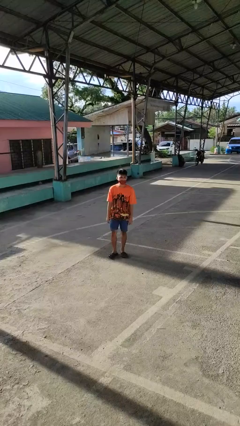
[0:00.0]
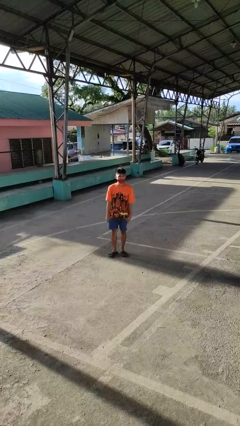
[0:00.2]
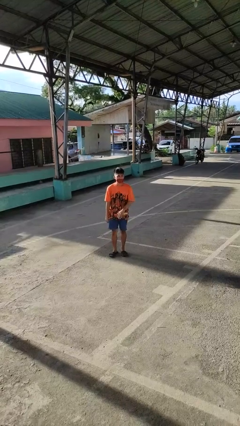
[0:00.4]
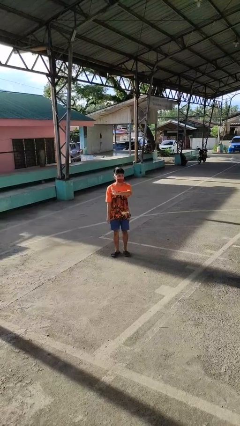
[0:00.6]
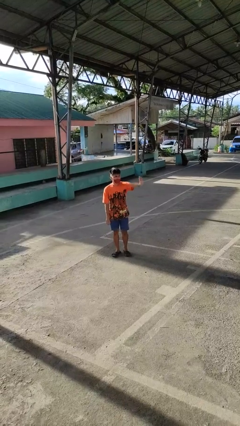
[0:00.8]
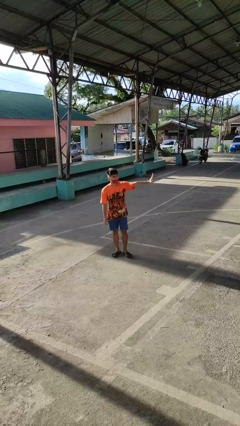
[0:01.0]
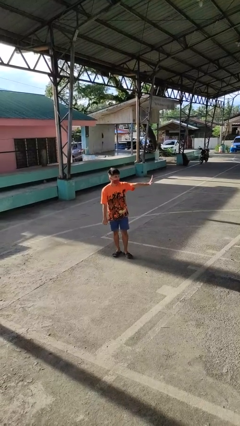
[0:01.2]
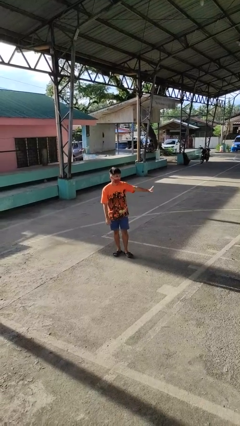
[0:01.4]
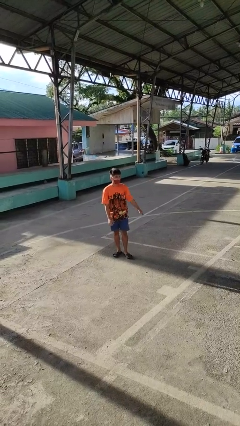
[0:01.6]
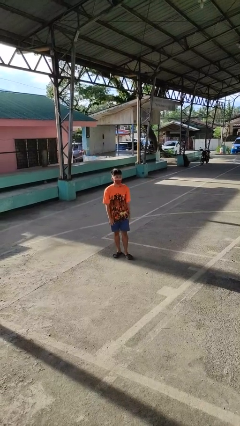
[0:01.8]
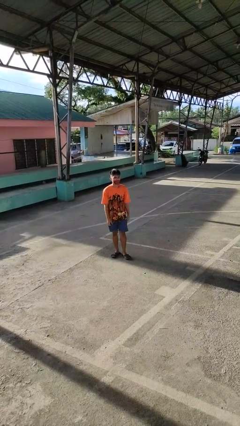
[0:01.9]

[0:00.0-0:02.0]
person gestures swipe left

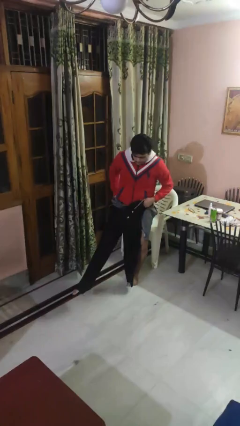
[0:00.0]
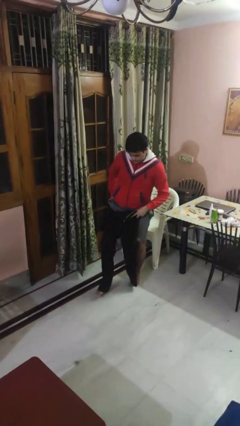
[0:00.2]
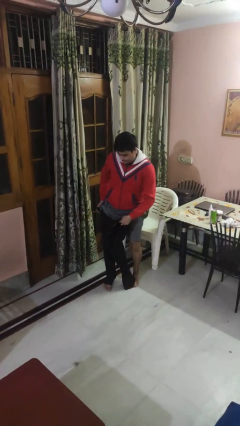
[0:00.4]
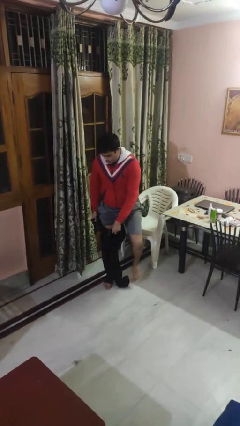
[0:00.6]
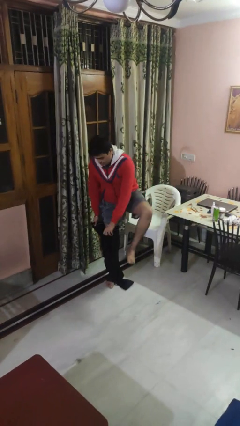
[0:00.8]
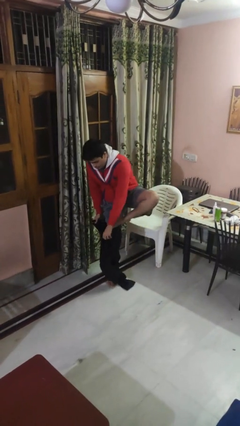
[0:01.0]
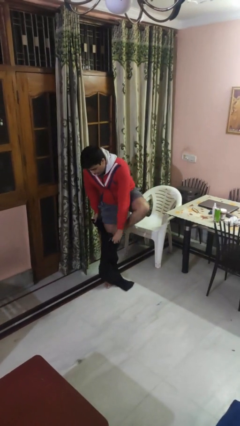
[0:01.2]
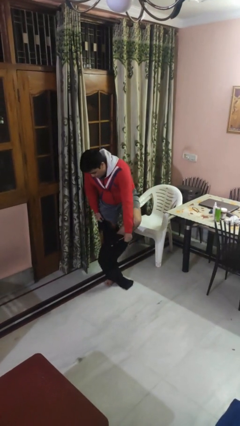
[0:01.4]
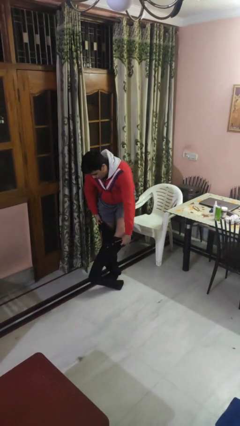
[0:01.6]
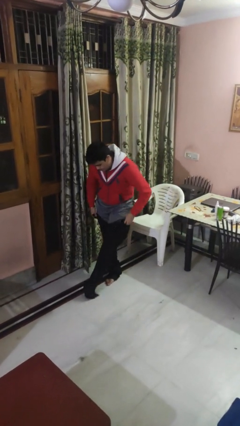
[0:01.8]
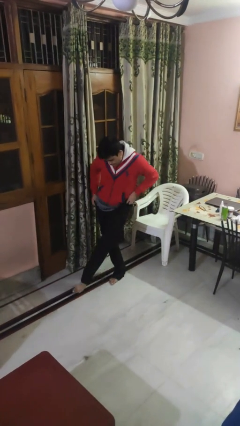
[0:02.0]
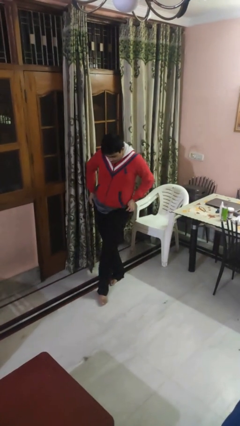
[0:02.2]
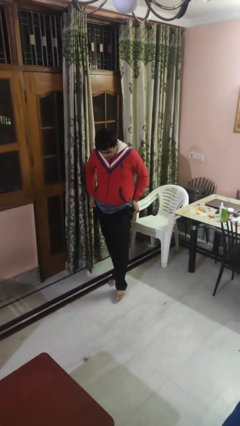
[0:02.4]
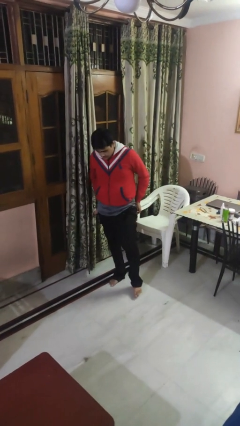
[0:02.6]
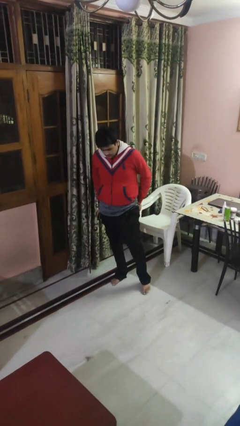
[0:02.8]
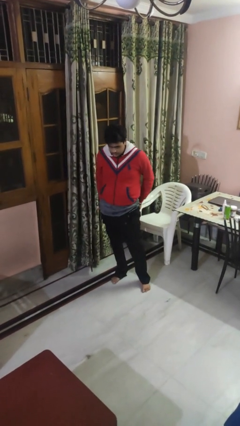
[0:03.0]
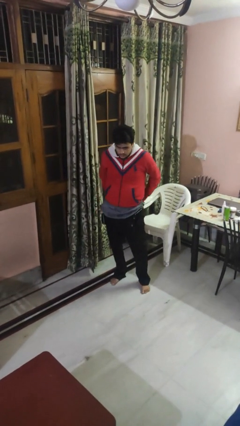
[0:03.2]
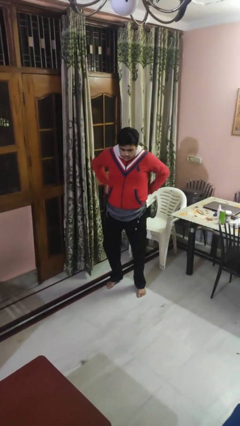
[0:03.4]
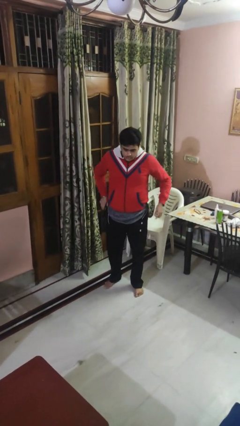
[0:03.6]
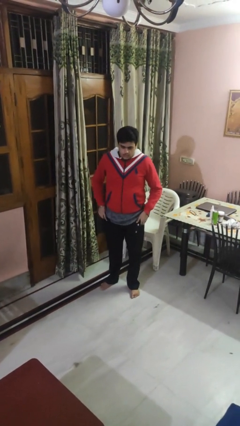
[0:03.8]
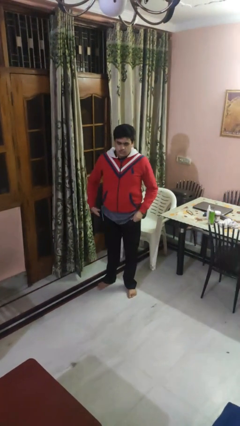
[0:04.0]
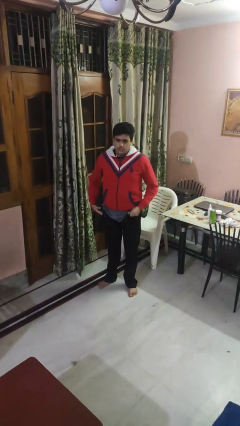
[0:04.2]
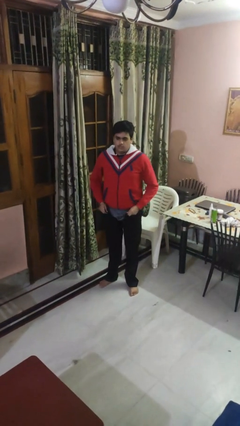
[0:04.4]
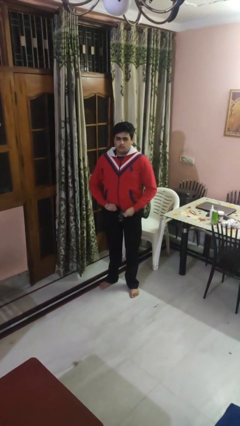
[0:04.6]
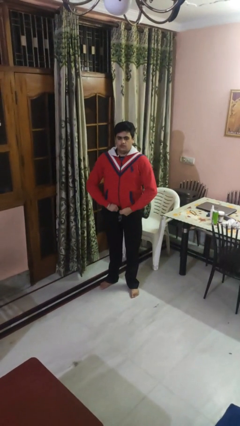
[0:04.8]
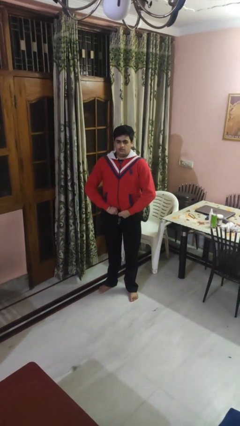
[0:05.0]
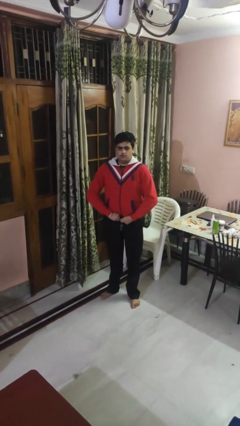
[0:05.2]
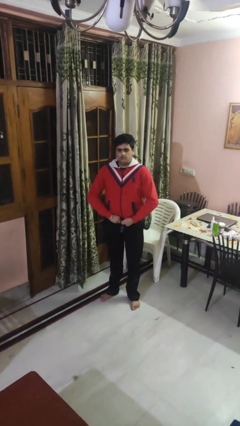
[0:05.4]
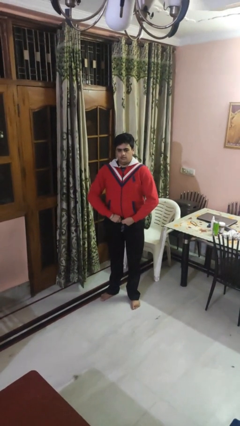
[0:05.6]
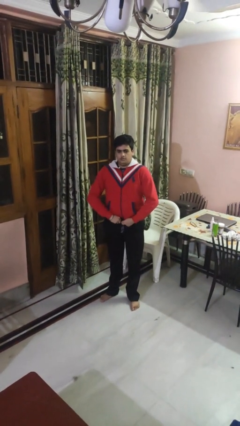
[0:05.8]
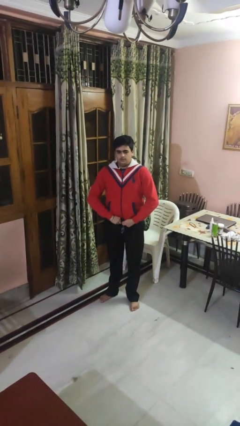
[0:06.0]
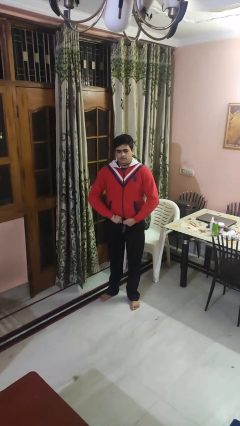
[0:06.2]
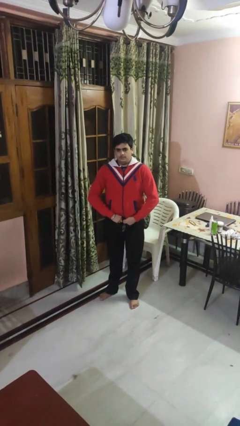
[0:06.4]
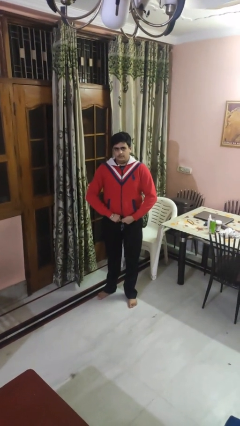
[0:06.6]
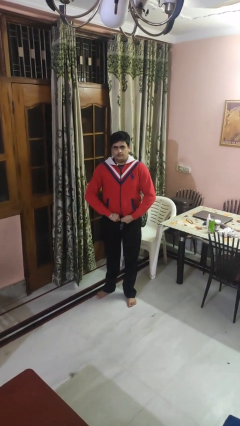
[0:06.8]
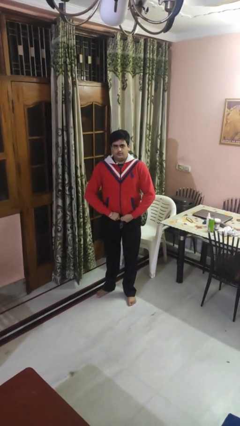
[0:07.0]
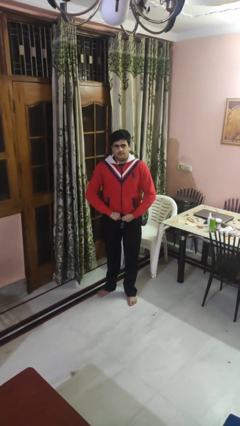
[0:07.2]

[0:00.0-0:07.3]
person puts on pants

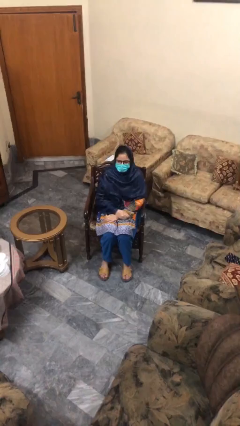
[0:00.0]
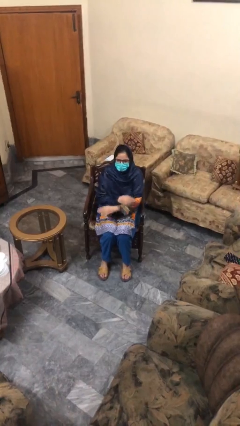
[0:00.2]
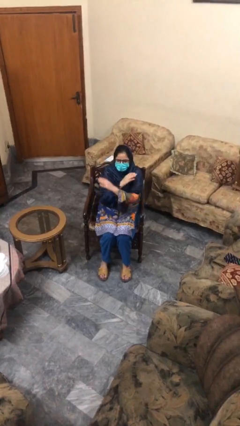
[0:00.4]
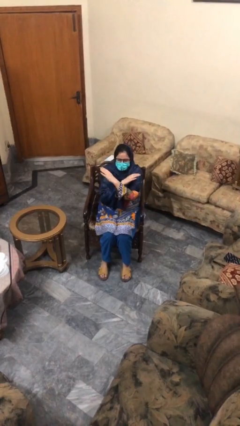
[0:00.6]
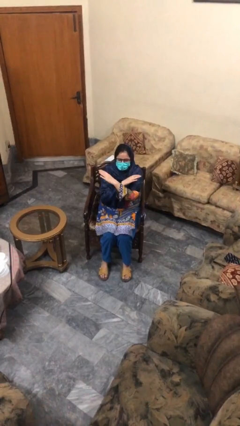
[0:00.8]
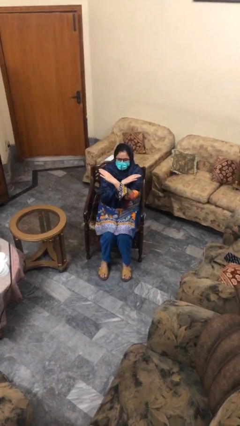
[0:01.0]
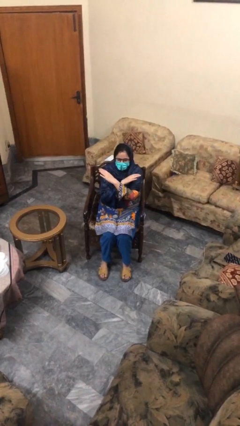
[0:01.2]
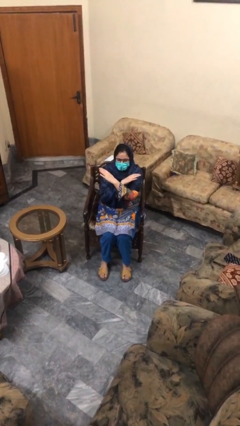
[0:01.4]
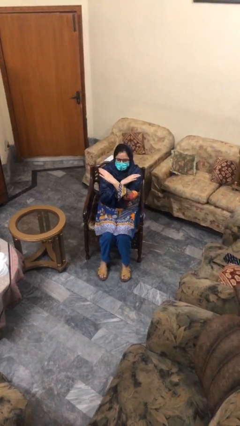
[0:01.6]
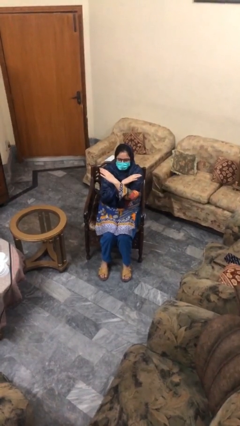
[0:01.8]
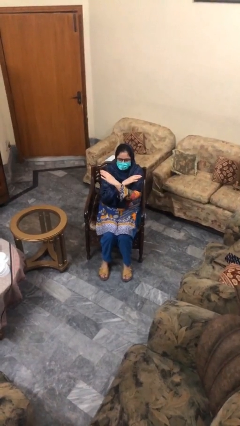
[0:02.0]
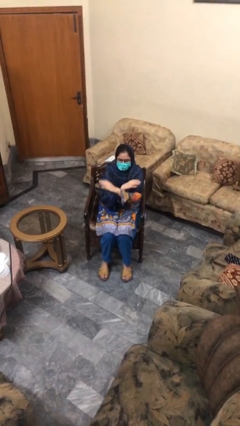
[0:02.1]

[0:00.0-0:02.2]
person gestures arms x

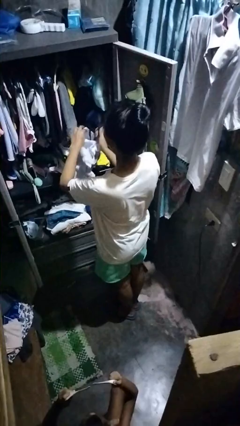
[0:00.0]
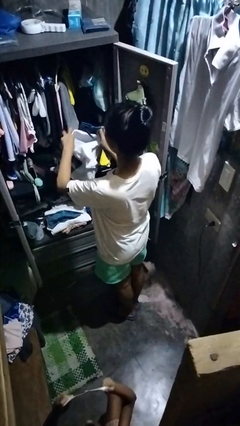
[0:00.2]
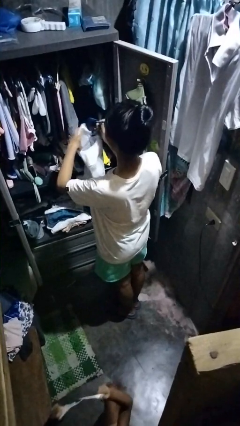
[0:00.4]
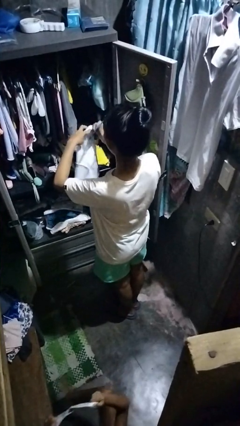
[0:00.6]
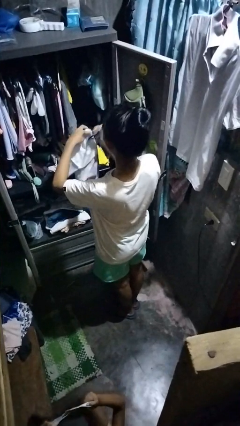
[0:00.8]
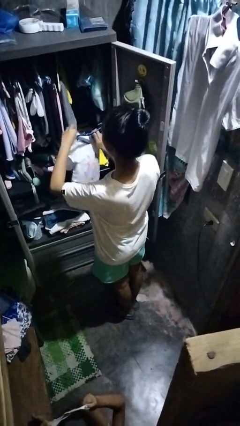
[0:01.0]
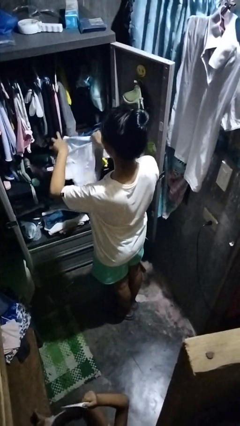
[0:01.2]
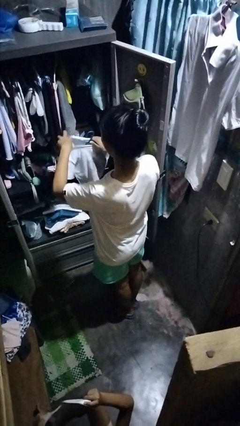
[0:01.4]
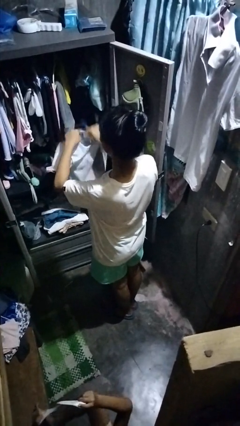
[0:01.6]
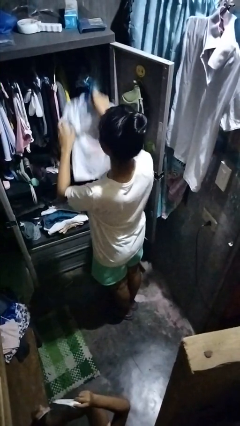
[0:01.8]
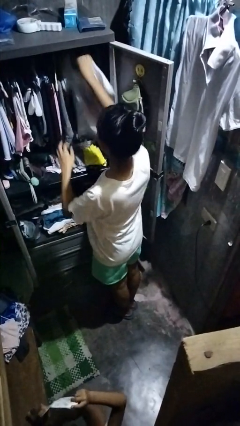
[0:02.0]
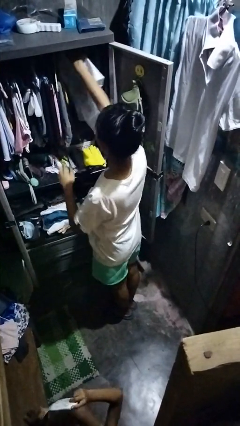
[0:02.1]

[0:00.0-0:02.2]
person puts clothes into closet

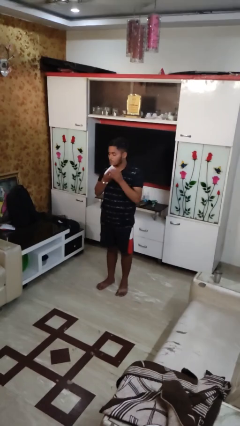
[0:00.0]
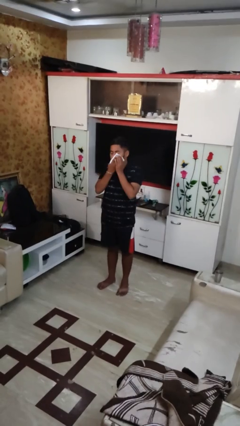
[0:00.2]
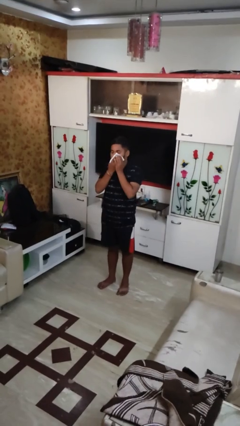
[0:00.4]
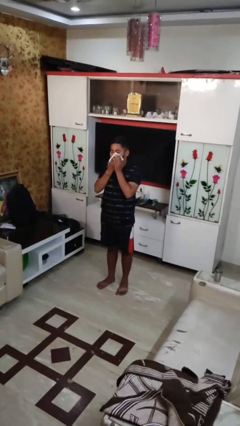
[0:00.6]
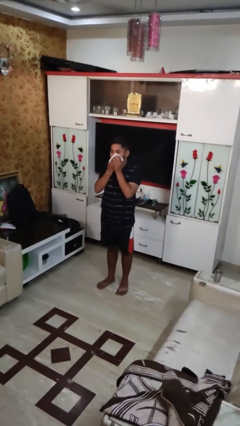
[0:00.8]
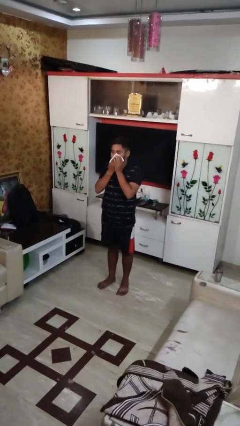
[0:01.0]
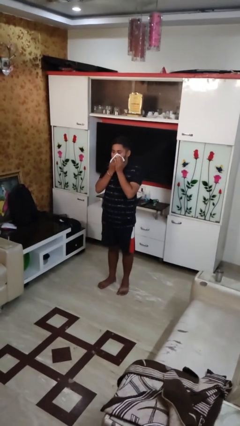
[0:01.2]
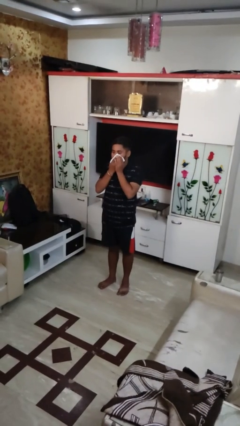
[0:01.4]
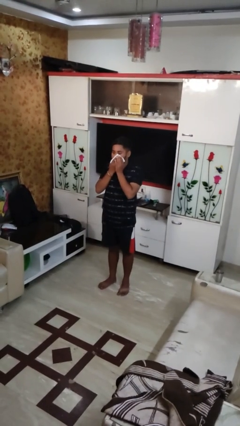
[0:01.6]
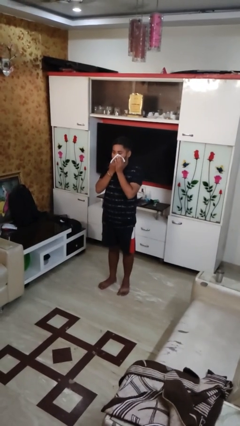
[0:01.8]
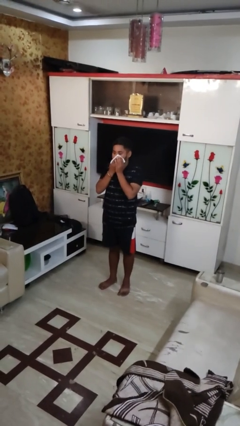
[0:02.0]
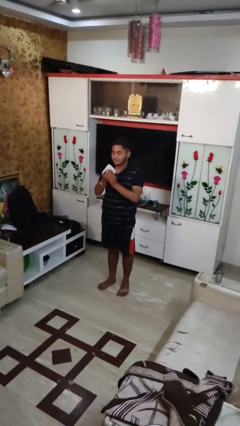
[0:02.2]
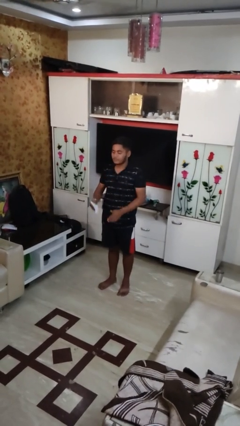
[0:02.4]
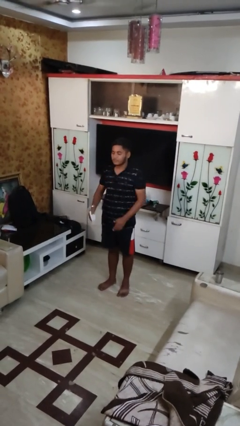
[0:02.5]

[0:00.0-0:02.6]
person wipes mouth with napkin

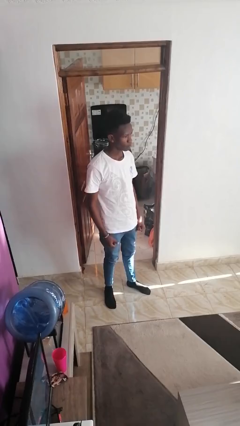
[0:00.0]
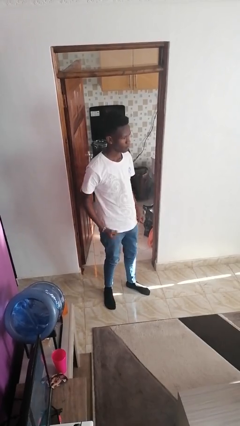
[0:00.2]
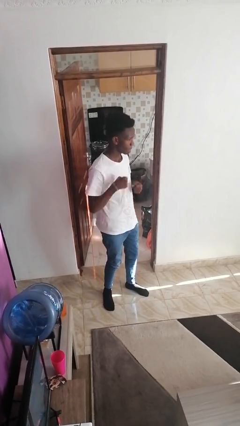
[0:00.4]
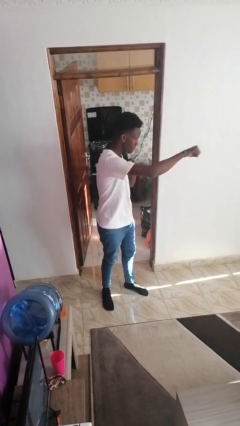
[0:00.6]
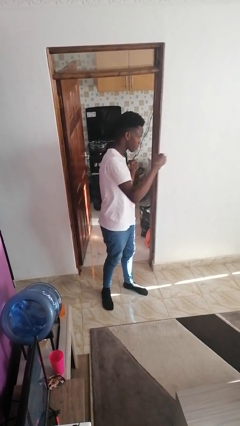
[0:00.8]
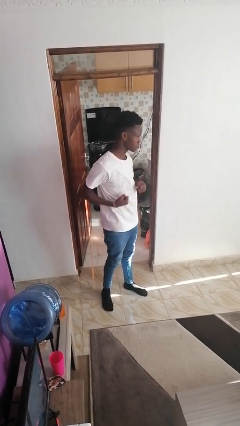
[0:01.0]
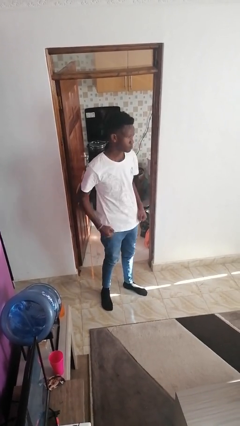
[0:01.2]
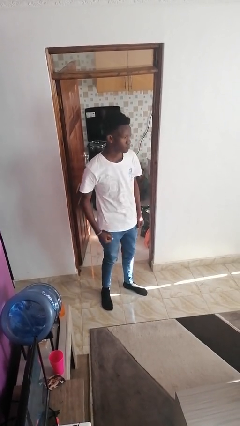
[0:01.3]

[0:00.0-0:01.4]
person punches
